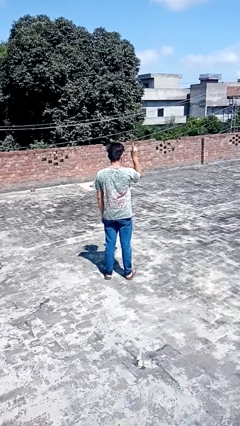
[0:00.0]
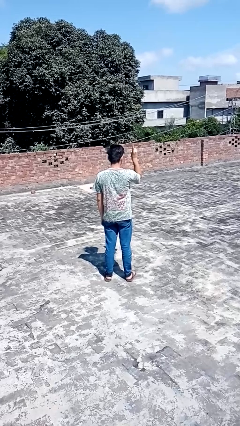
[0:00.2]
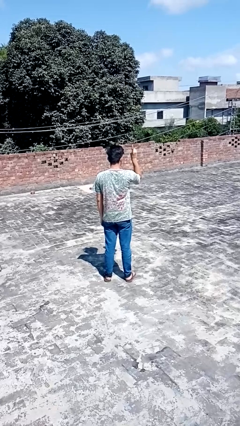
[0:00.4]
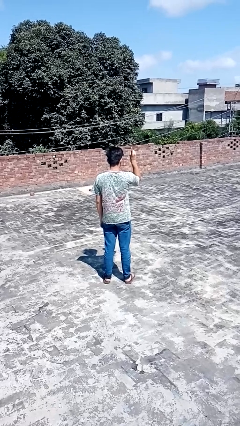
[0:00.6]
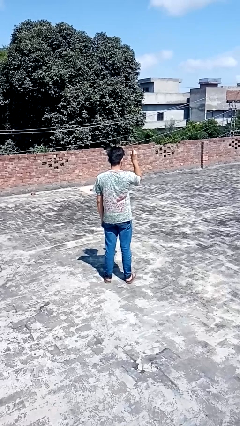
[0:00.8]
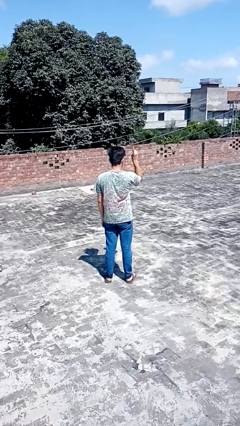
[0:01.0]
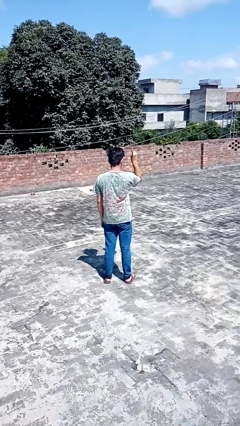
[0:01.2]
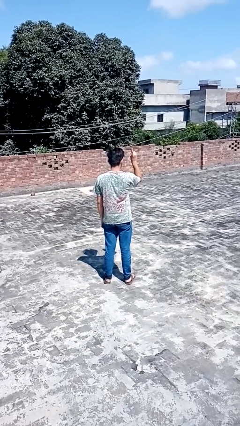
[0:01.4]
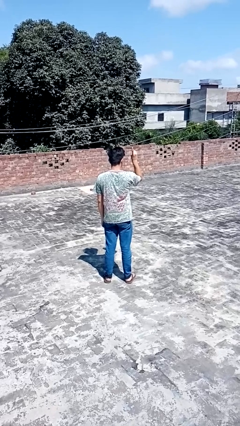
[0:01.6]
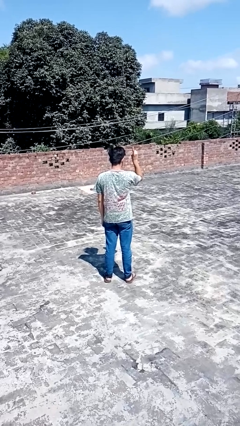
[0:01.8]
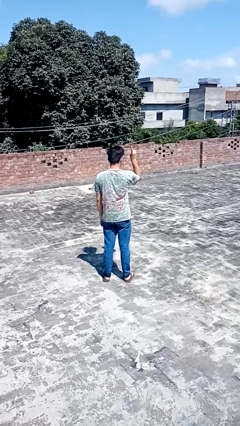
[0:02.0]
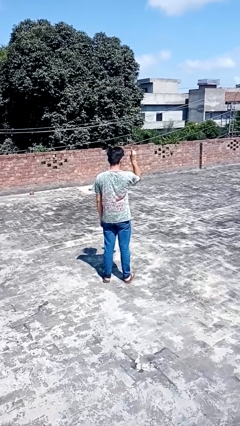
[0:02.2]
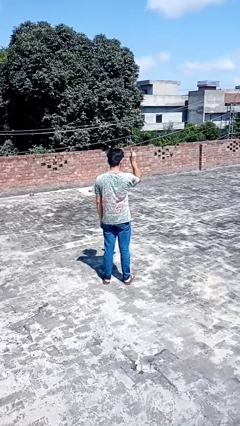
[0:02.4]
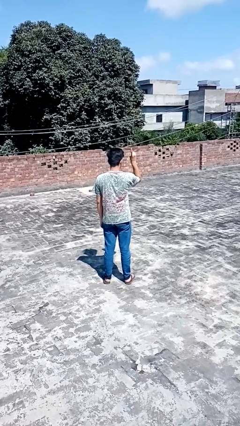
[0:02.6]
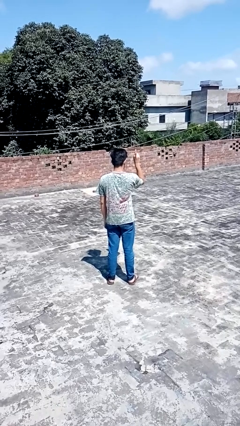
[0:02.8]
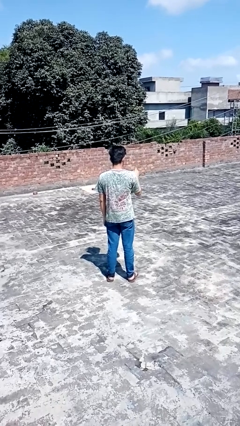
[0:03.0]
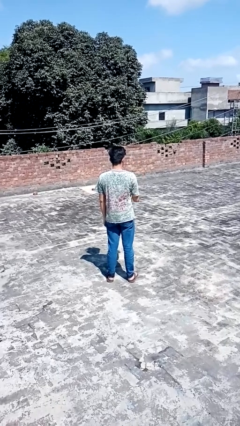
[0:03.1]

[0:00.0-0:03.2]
person gestures number one

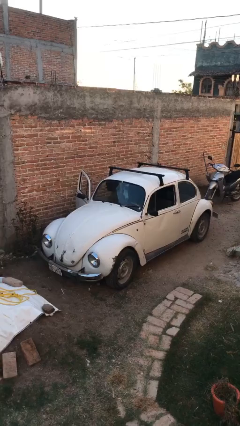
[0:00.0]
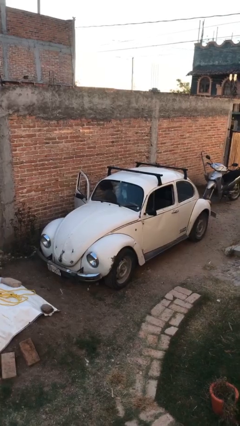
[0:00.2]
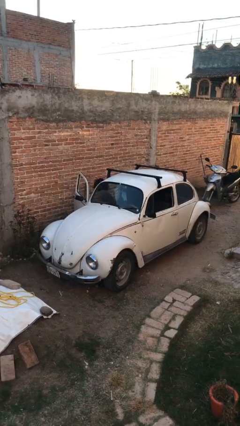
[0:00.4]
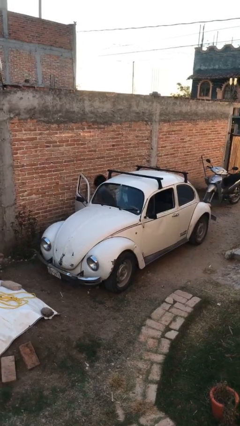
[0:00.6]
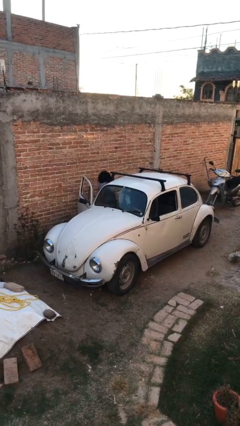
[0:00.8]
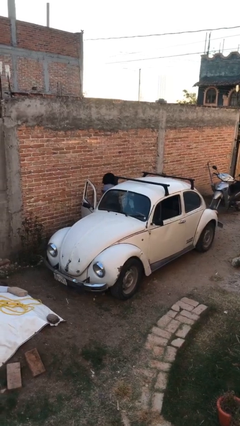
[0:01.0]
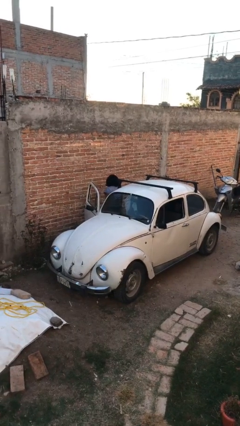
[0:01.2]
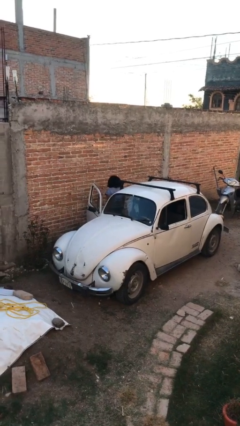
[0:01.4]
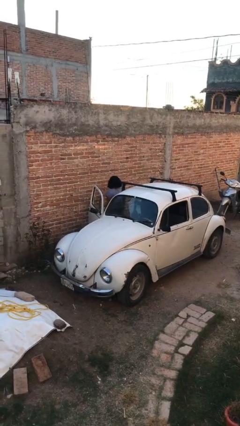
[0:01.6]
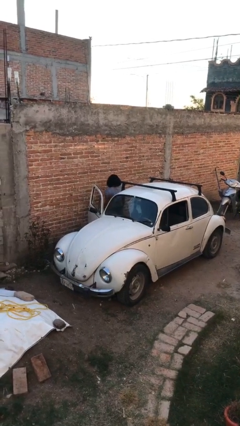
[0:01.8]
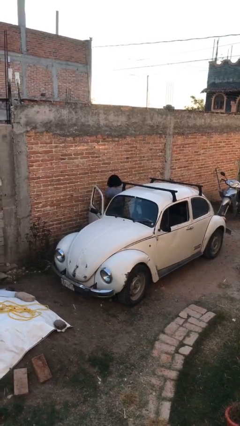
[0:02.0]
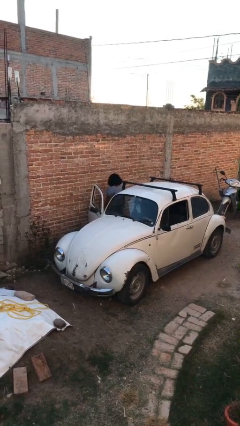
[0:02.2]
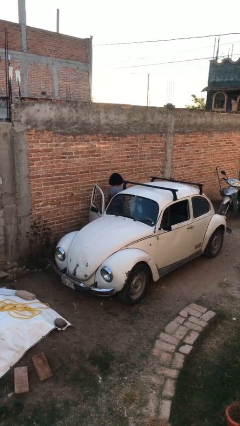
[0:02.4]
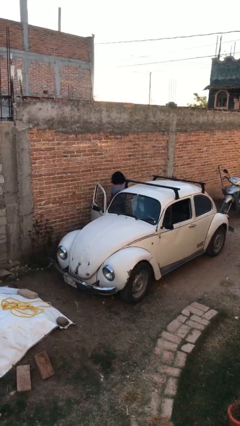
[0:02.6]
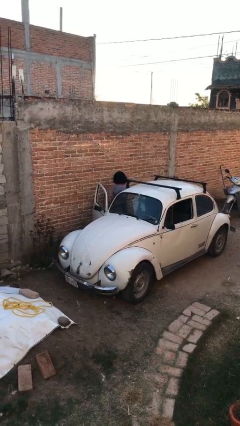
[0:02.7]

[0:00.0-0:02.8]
person exits car

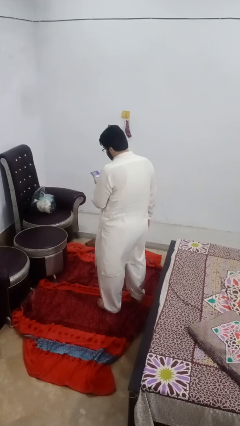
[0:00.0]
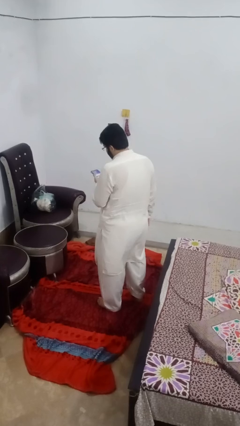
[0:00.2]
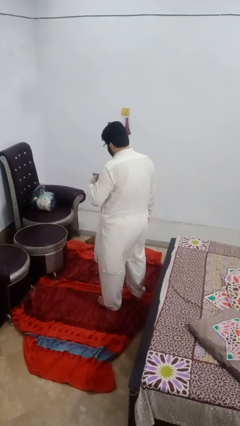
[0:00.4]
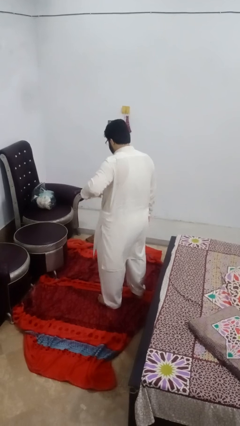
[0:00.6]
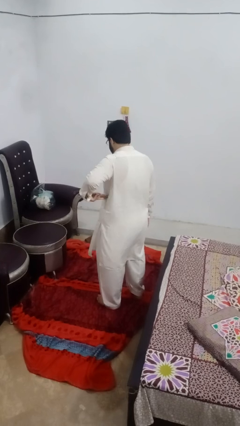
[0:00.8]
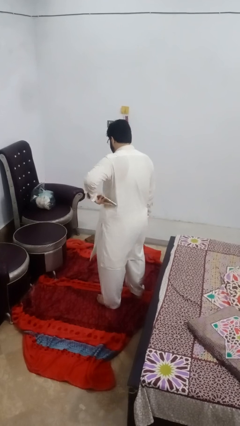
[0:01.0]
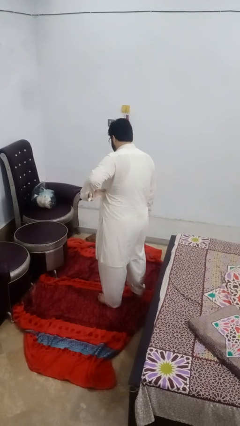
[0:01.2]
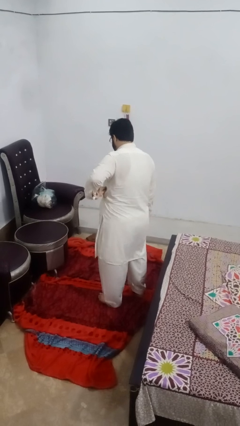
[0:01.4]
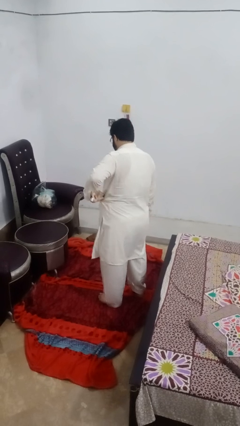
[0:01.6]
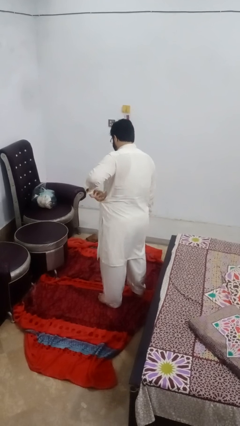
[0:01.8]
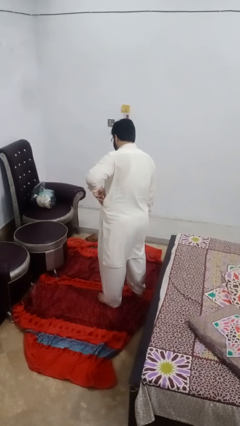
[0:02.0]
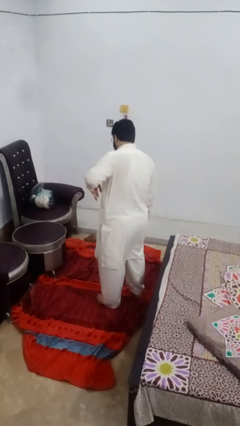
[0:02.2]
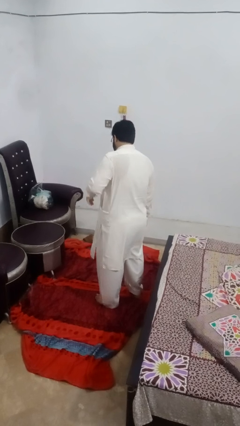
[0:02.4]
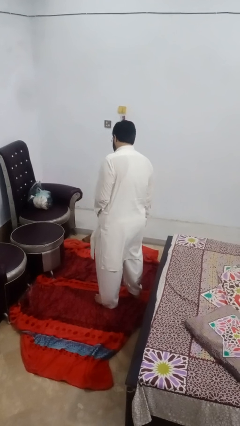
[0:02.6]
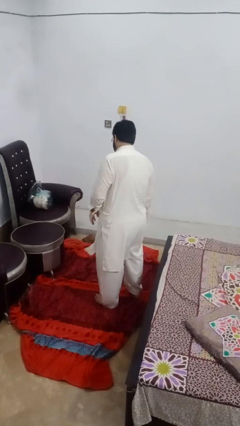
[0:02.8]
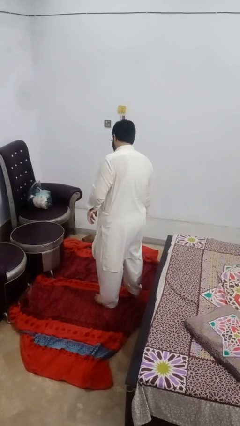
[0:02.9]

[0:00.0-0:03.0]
person puts phone into pocket

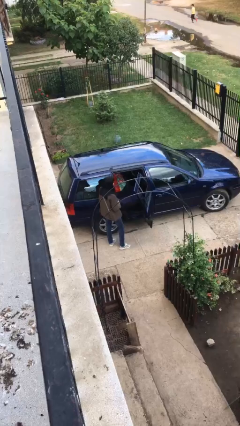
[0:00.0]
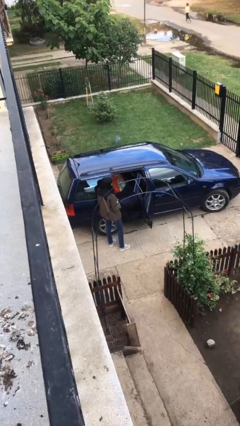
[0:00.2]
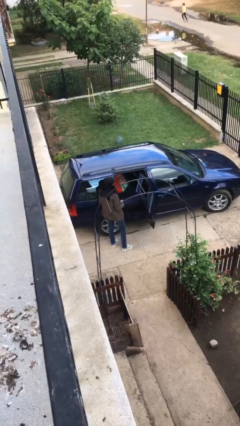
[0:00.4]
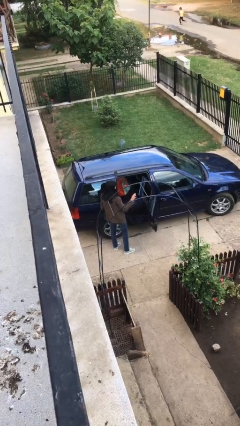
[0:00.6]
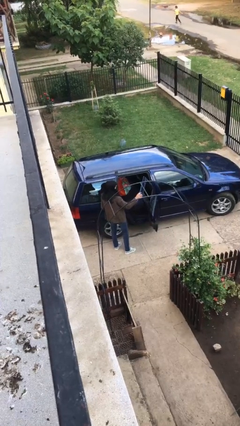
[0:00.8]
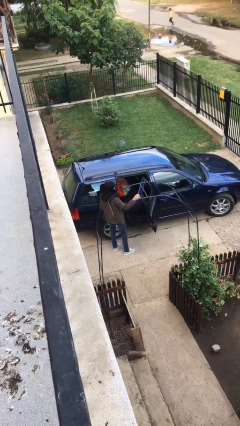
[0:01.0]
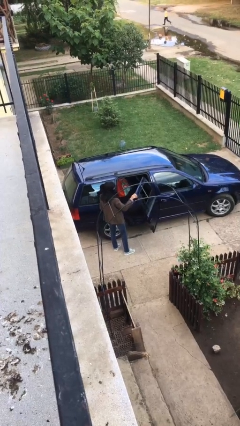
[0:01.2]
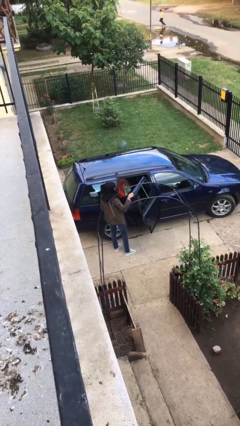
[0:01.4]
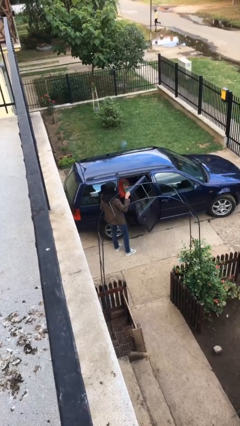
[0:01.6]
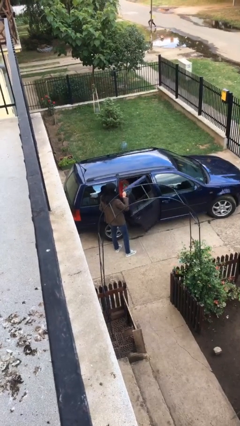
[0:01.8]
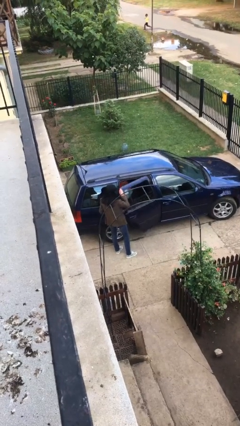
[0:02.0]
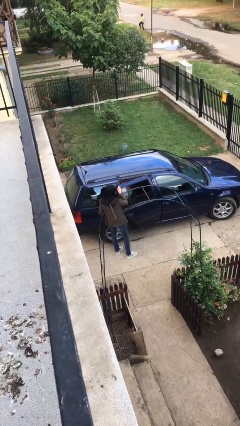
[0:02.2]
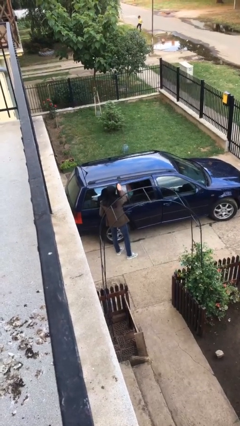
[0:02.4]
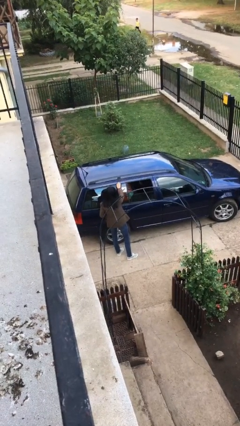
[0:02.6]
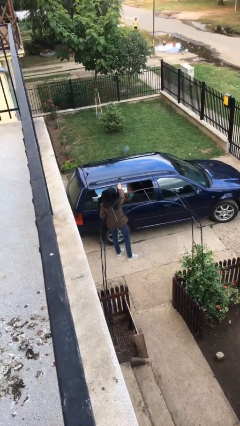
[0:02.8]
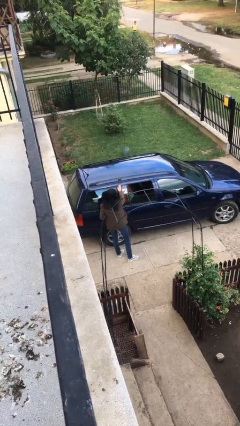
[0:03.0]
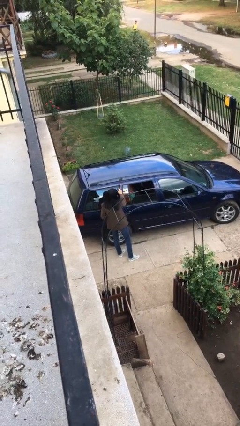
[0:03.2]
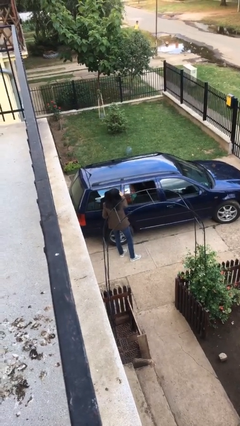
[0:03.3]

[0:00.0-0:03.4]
person closes car door

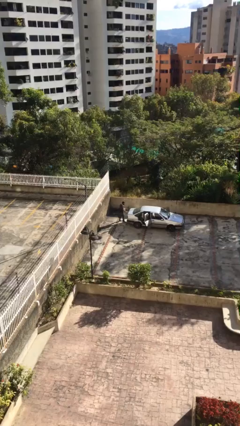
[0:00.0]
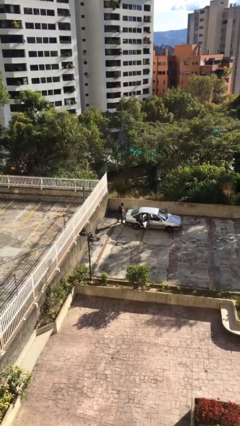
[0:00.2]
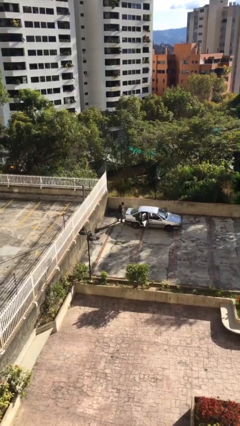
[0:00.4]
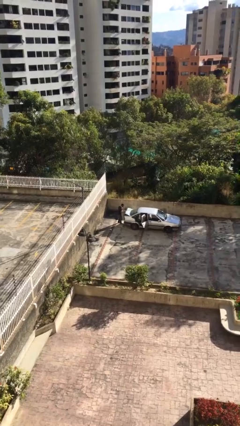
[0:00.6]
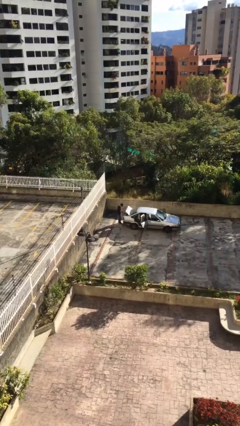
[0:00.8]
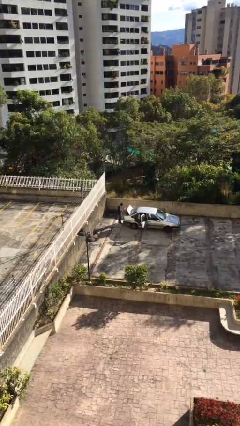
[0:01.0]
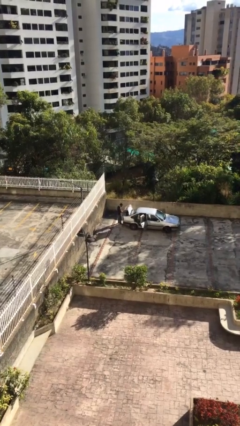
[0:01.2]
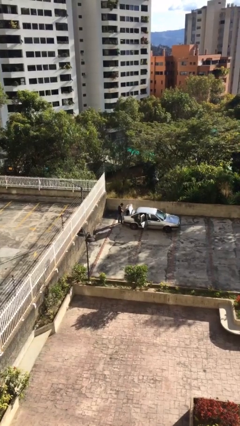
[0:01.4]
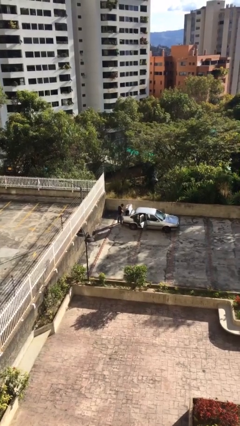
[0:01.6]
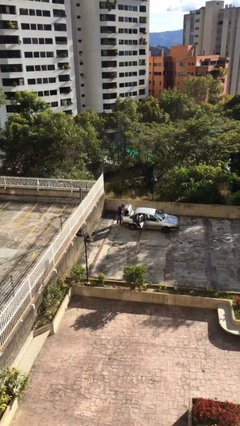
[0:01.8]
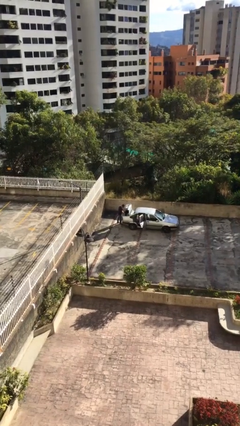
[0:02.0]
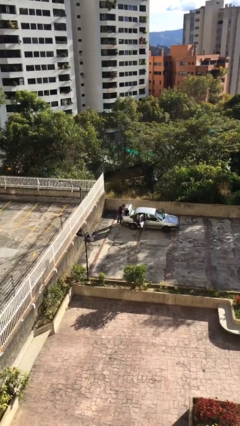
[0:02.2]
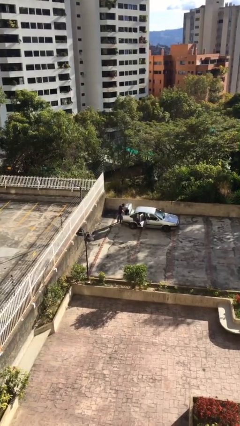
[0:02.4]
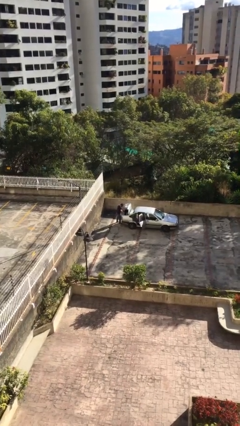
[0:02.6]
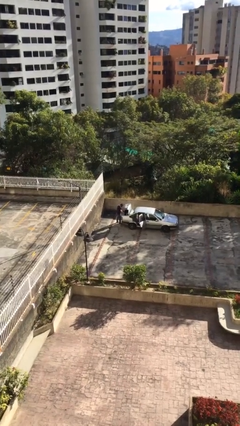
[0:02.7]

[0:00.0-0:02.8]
person opens car trunk

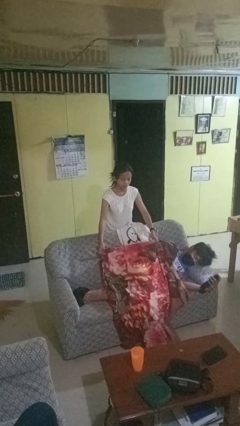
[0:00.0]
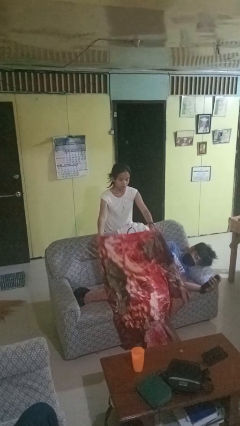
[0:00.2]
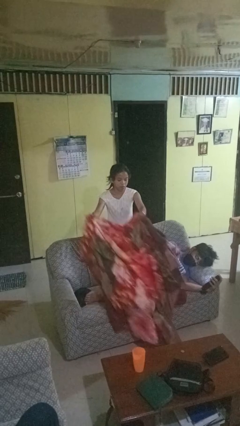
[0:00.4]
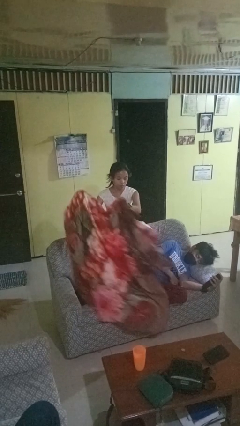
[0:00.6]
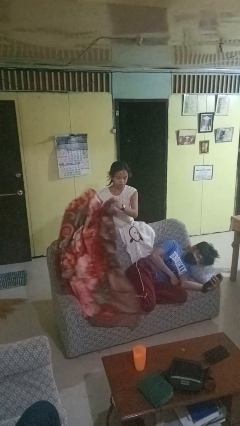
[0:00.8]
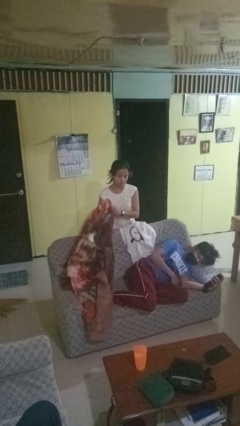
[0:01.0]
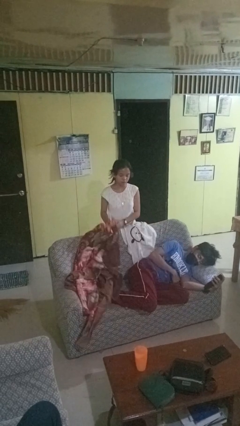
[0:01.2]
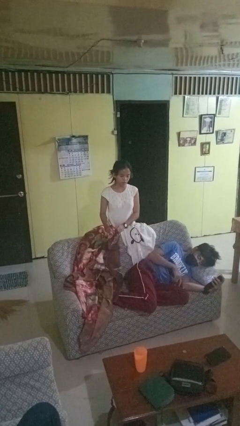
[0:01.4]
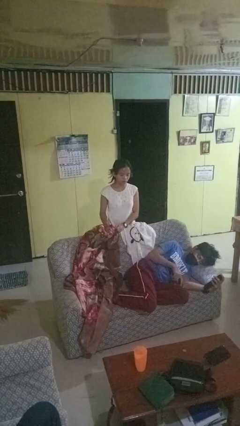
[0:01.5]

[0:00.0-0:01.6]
person uncovers friend with blanket

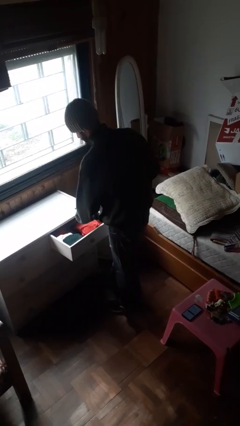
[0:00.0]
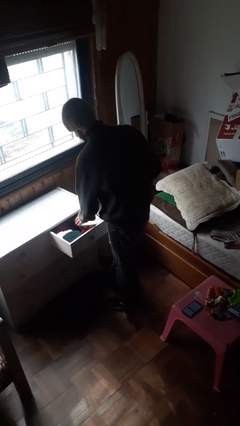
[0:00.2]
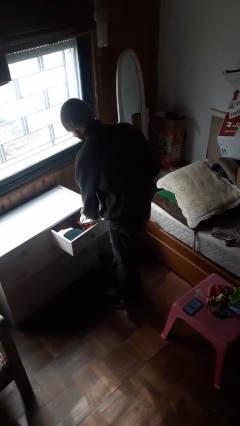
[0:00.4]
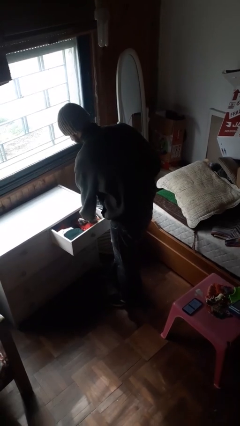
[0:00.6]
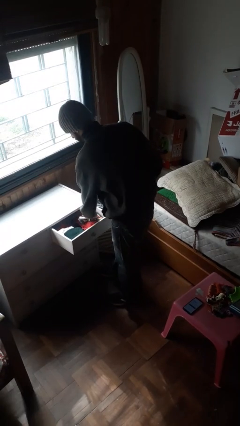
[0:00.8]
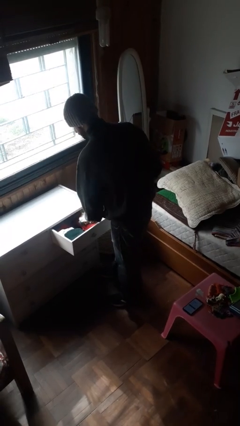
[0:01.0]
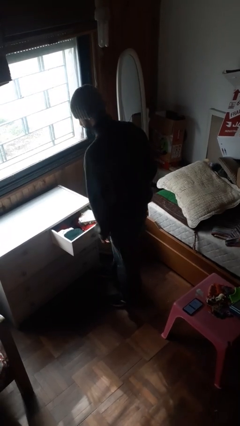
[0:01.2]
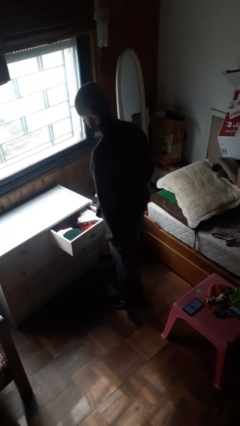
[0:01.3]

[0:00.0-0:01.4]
person puts clothes into dresser
